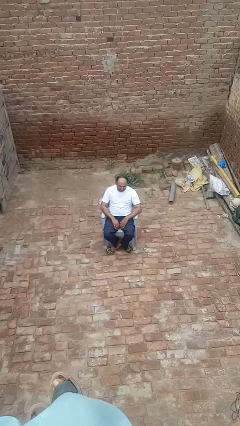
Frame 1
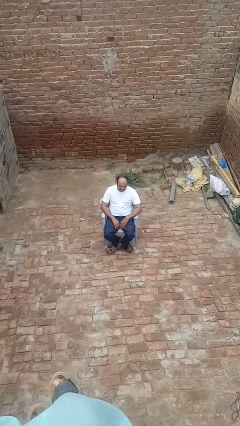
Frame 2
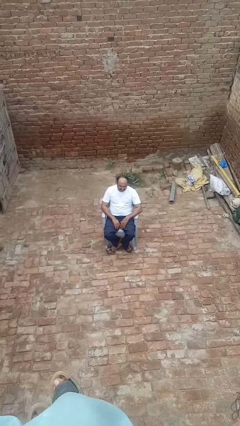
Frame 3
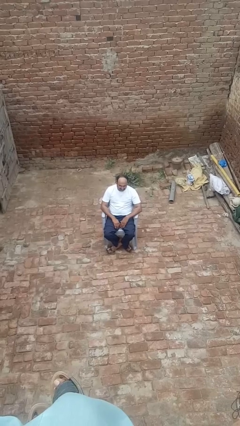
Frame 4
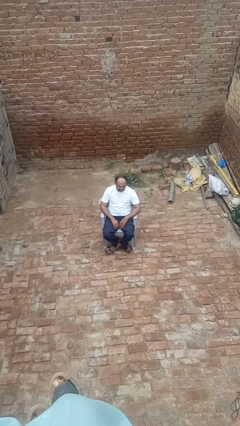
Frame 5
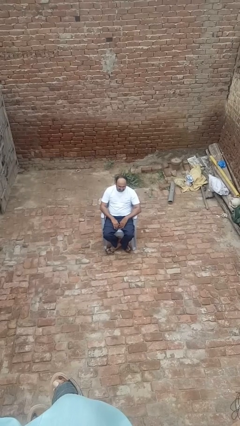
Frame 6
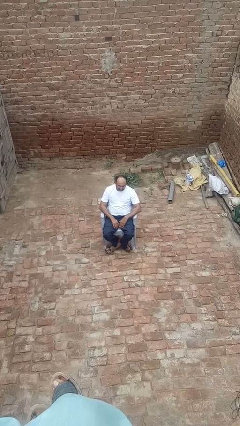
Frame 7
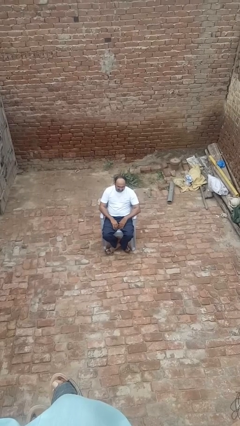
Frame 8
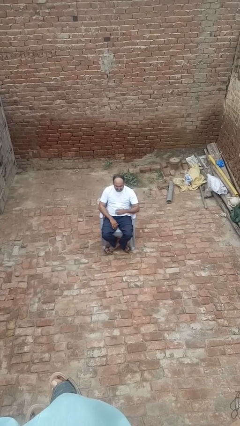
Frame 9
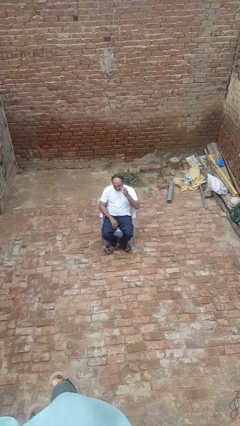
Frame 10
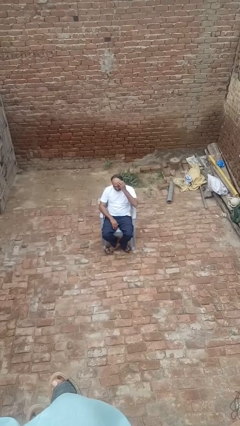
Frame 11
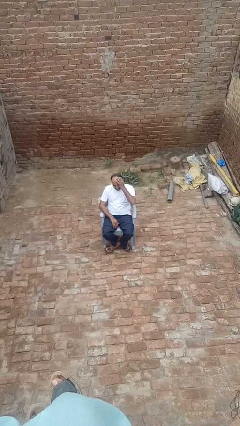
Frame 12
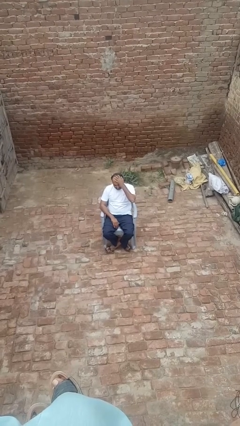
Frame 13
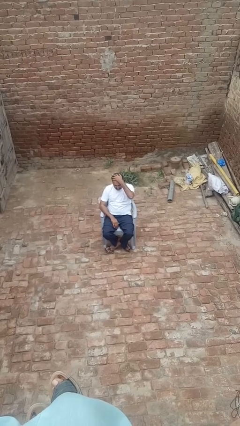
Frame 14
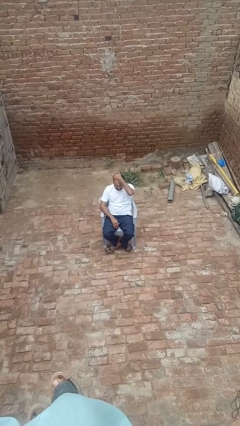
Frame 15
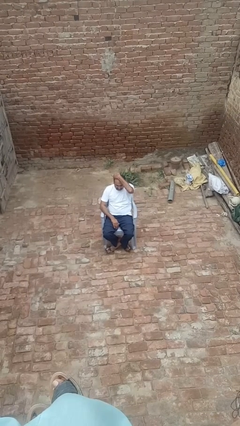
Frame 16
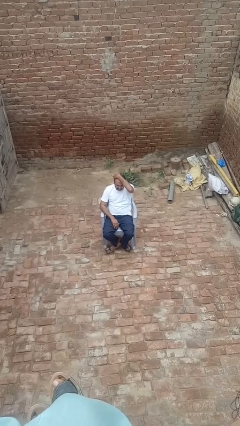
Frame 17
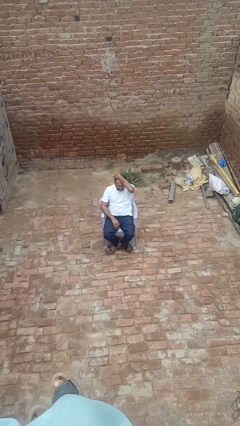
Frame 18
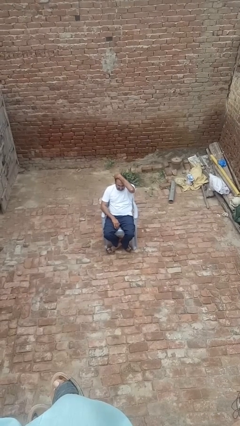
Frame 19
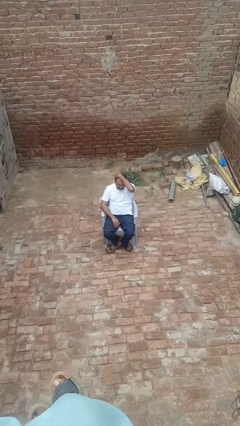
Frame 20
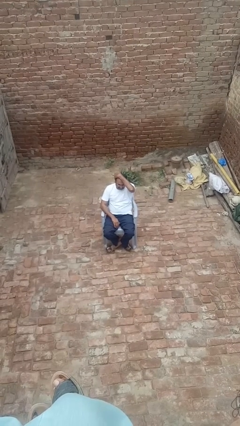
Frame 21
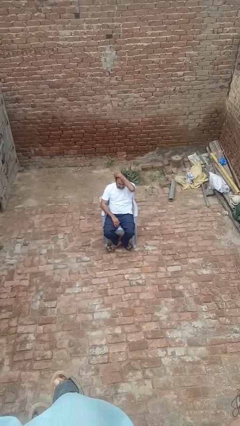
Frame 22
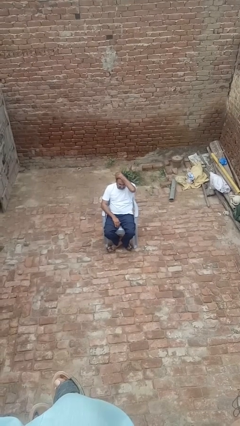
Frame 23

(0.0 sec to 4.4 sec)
person strokes hair

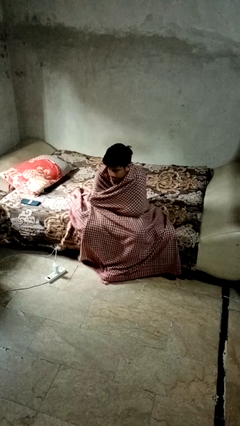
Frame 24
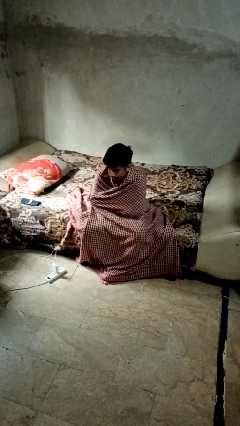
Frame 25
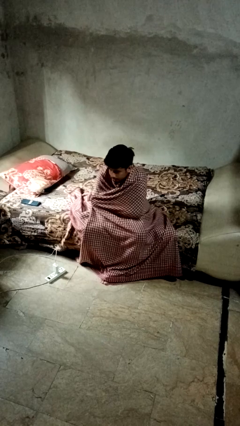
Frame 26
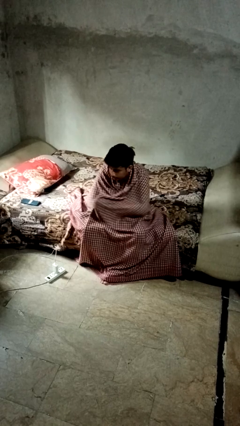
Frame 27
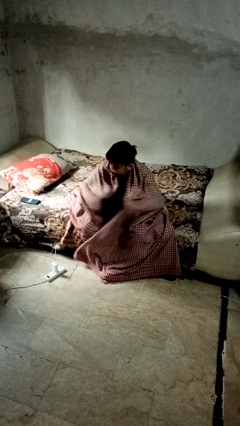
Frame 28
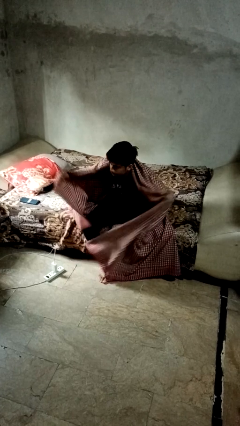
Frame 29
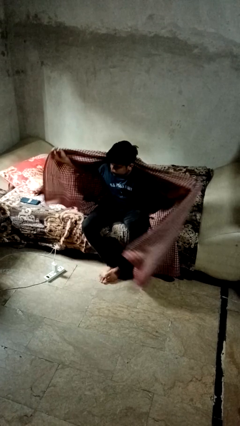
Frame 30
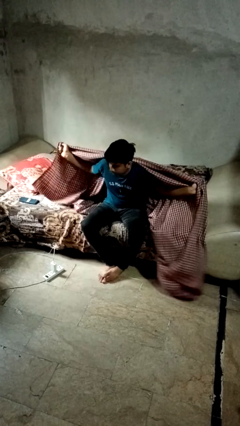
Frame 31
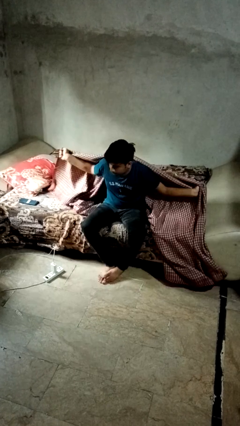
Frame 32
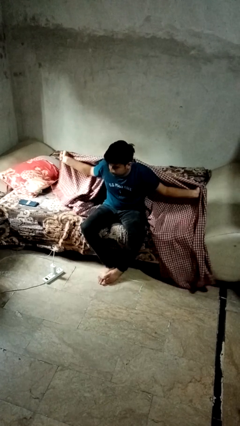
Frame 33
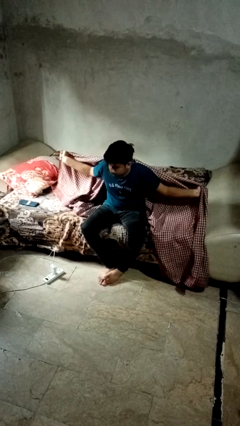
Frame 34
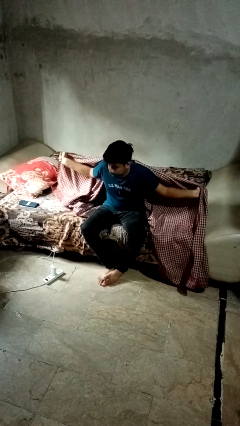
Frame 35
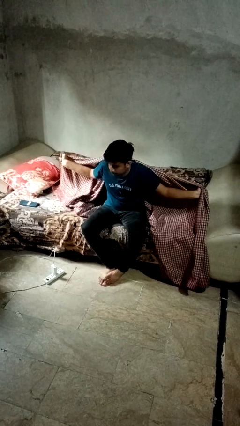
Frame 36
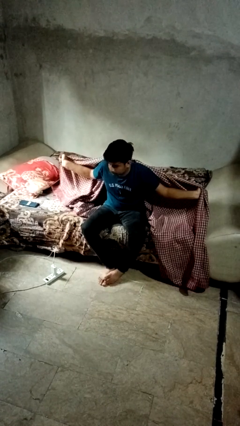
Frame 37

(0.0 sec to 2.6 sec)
person uncovers with blanket

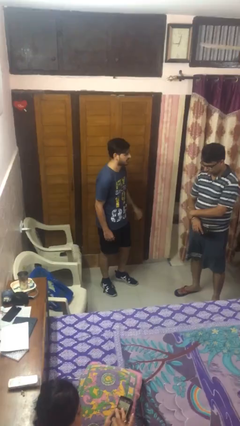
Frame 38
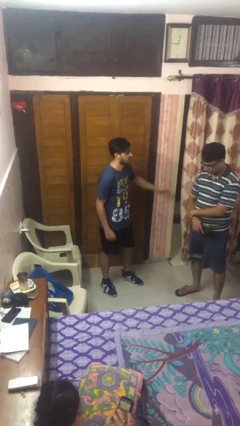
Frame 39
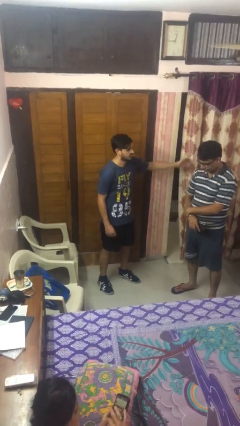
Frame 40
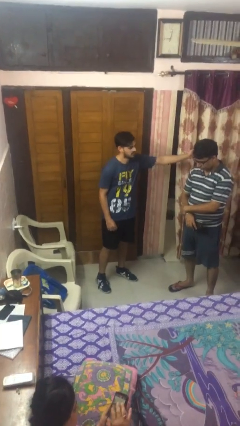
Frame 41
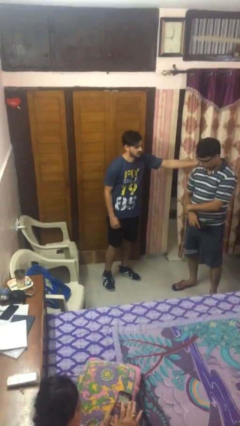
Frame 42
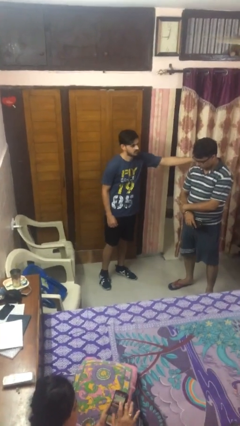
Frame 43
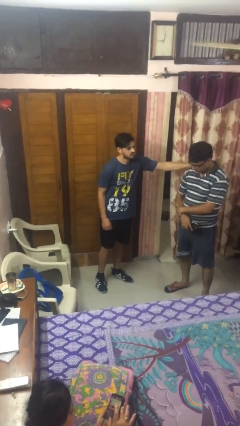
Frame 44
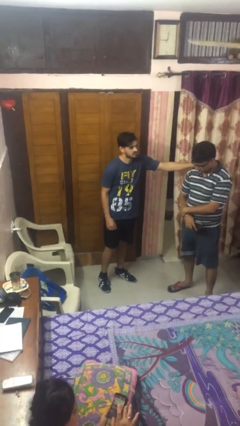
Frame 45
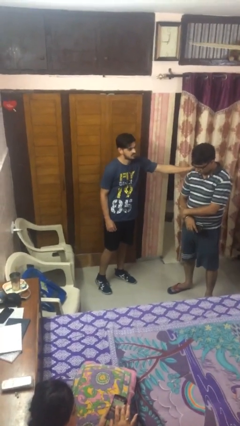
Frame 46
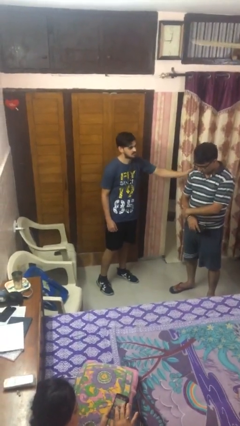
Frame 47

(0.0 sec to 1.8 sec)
person pounds shoulders of person

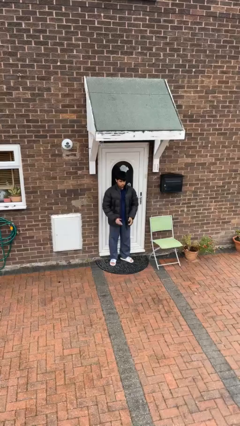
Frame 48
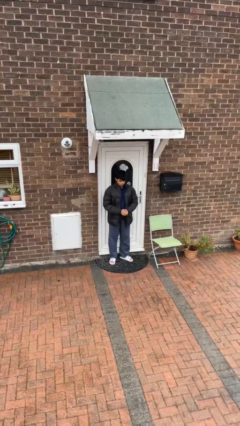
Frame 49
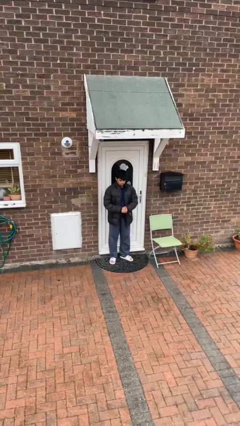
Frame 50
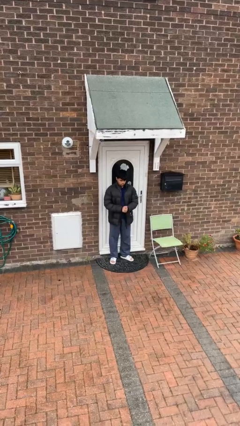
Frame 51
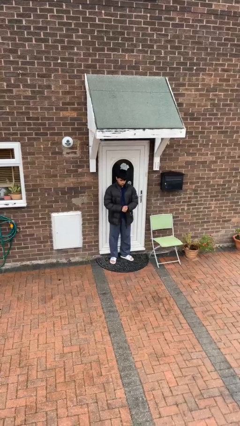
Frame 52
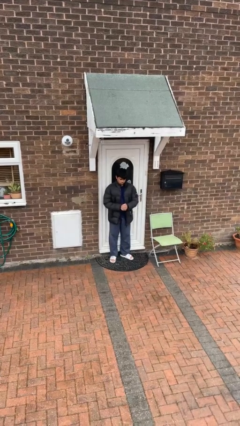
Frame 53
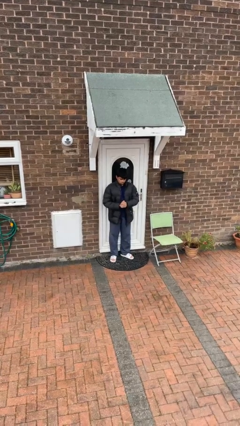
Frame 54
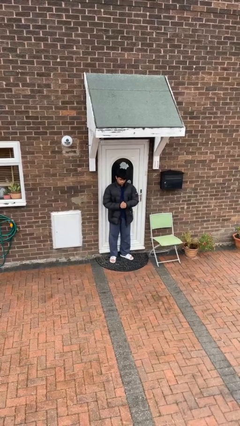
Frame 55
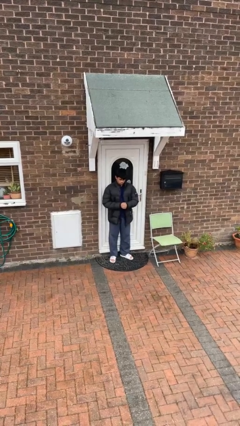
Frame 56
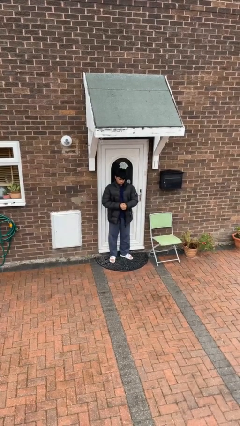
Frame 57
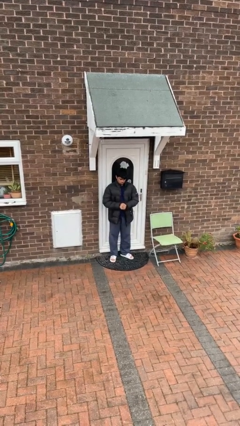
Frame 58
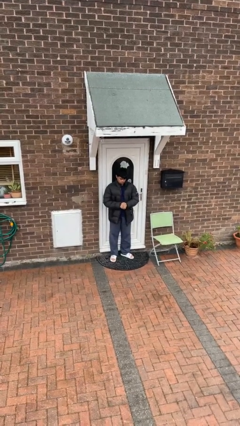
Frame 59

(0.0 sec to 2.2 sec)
person cracks knuckles

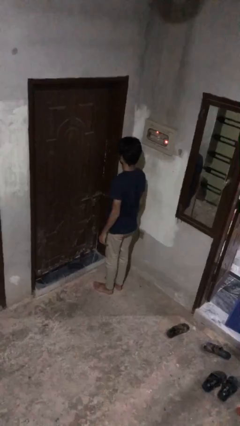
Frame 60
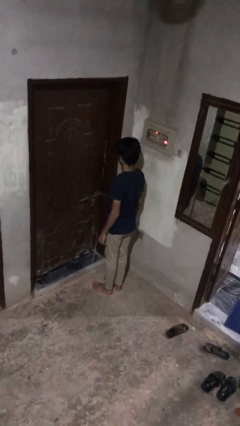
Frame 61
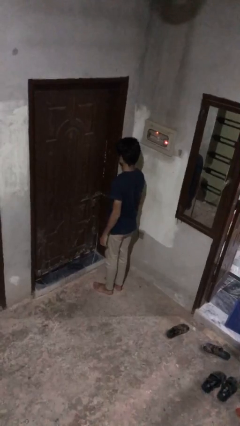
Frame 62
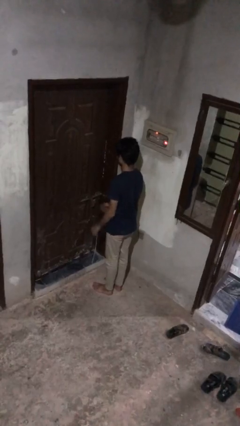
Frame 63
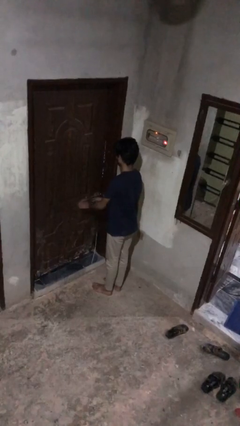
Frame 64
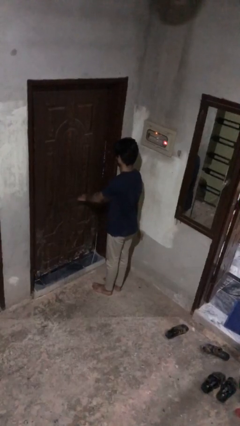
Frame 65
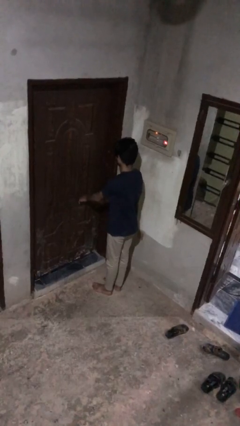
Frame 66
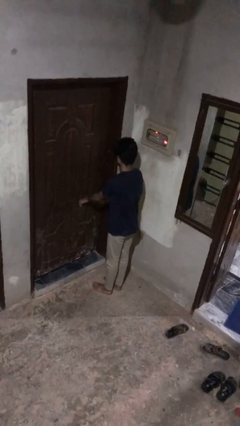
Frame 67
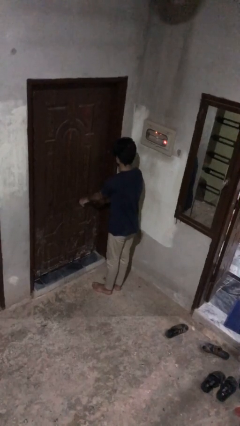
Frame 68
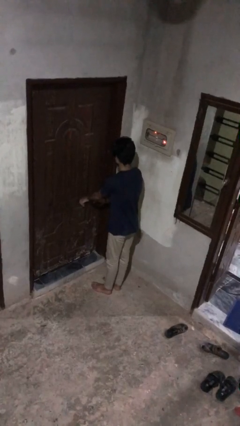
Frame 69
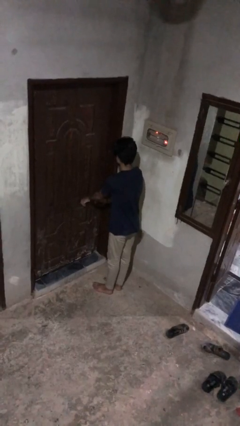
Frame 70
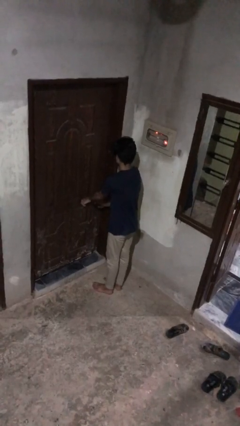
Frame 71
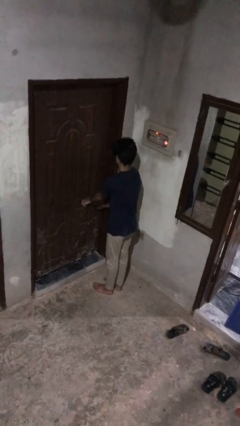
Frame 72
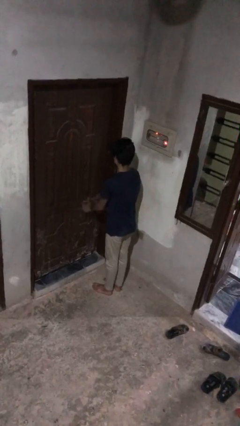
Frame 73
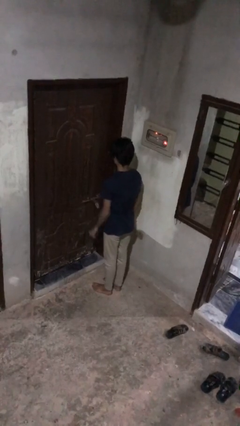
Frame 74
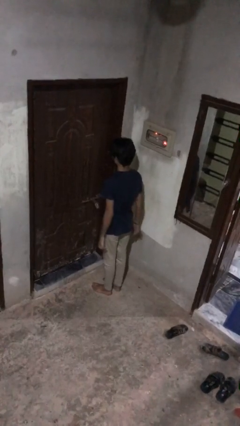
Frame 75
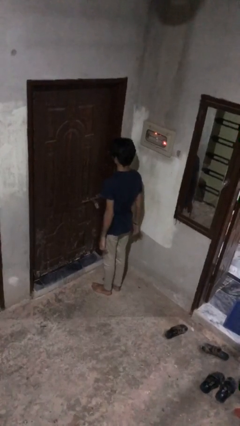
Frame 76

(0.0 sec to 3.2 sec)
person locks door with keys

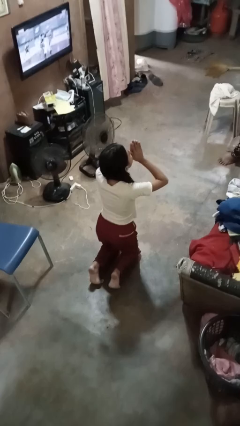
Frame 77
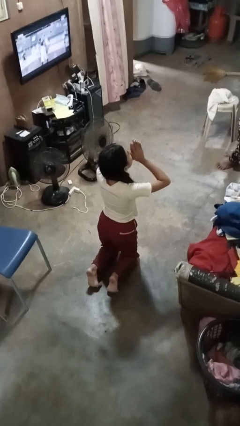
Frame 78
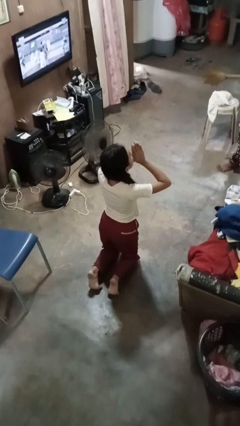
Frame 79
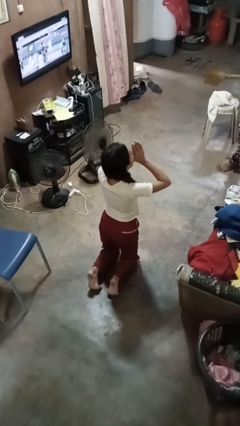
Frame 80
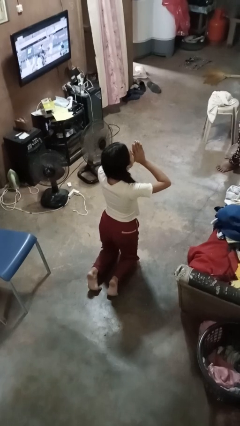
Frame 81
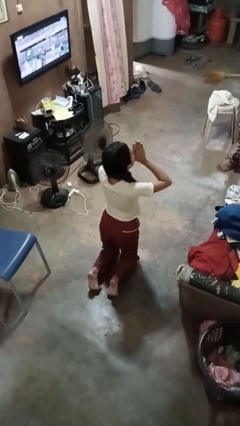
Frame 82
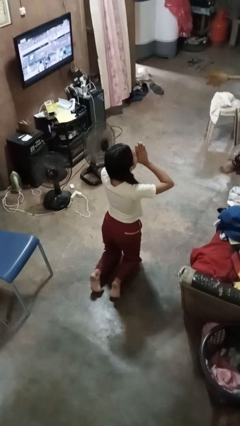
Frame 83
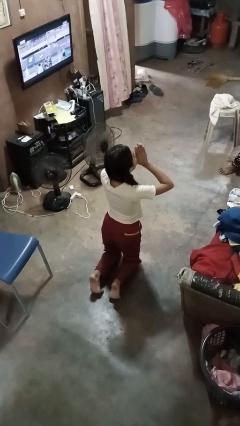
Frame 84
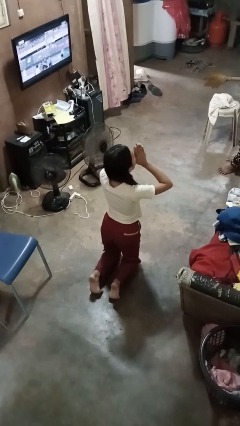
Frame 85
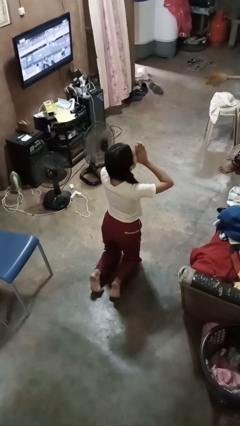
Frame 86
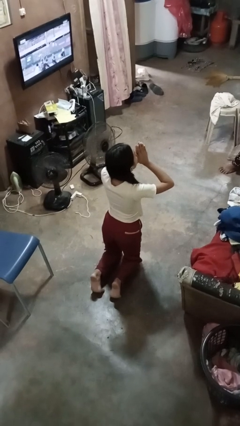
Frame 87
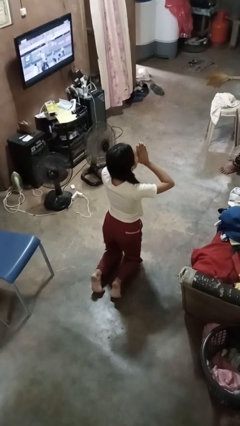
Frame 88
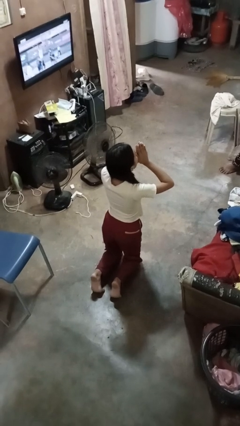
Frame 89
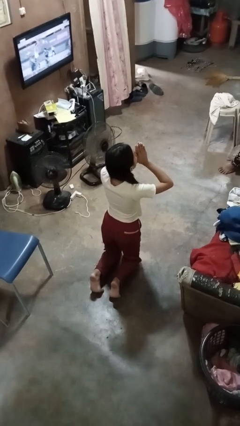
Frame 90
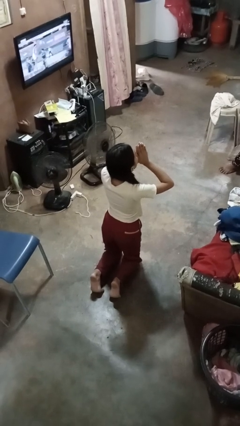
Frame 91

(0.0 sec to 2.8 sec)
person prays

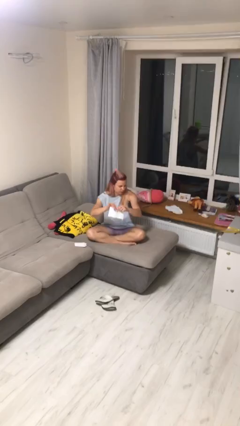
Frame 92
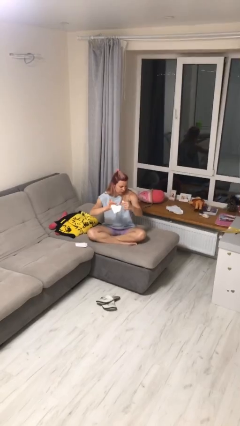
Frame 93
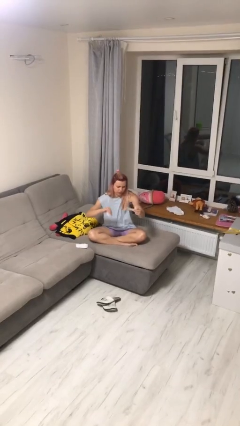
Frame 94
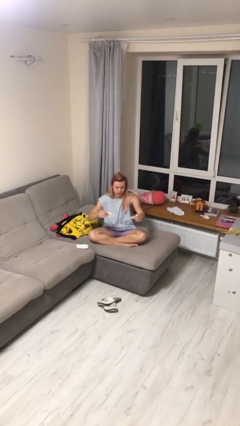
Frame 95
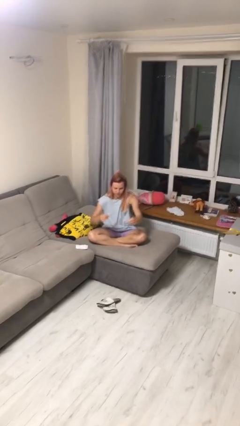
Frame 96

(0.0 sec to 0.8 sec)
person tears paper
